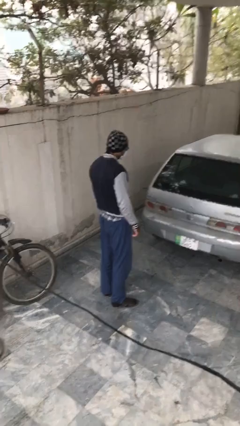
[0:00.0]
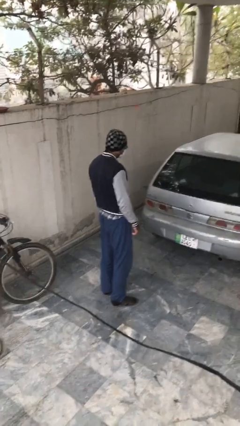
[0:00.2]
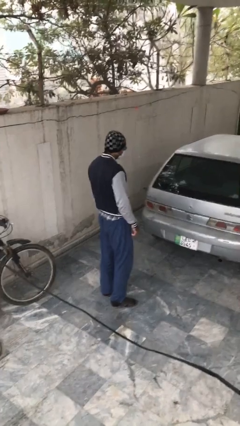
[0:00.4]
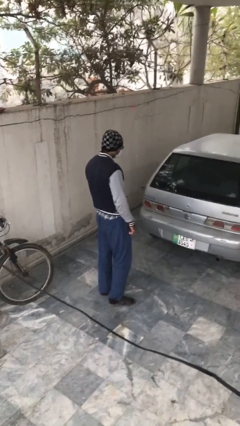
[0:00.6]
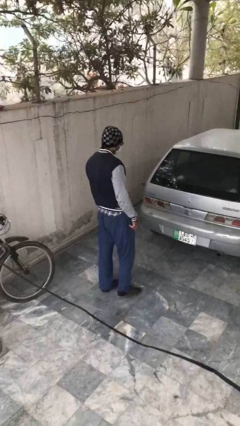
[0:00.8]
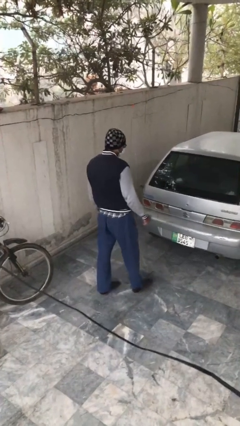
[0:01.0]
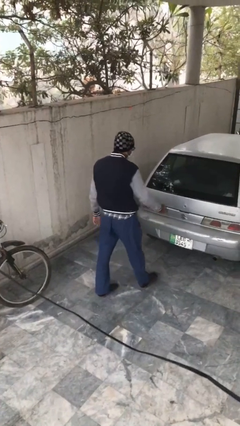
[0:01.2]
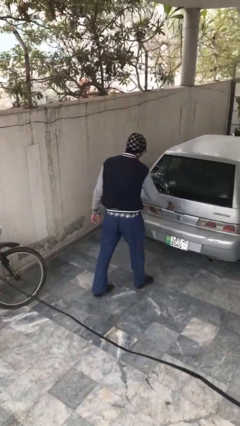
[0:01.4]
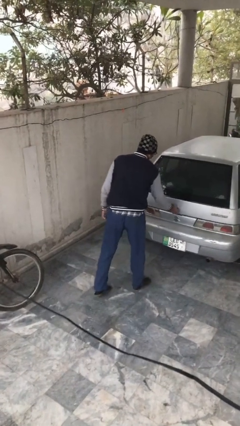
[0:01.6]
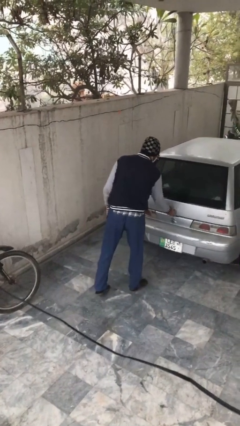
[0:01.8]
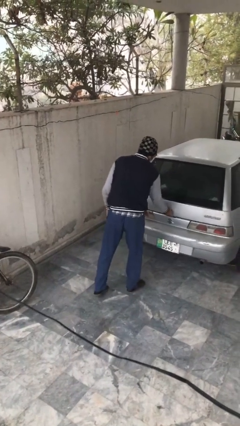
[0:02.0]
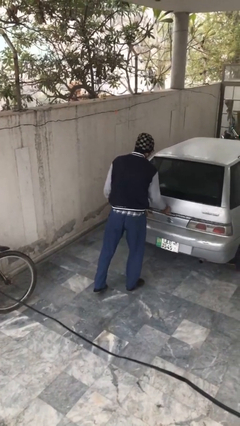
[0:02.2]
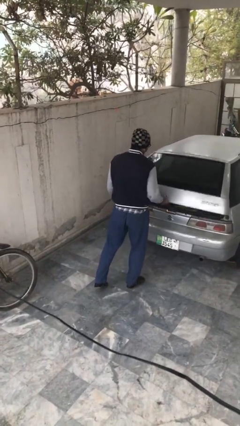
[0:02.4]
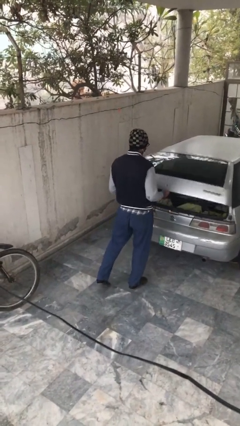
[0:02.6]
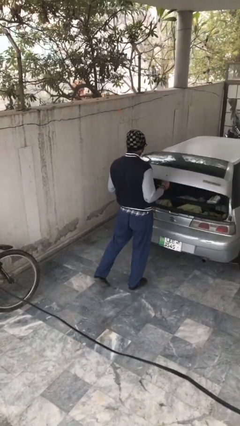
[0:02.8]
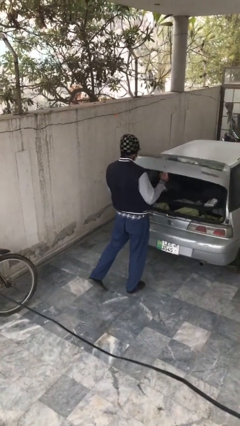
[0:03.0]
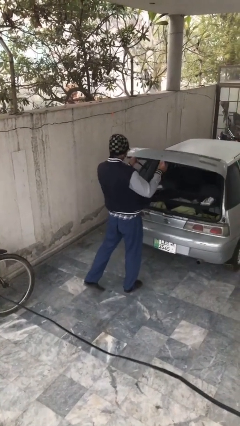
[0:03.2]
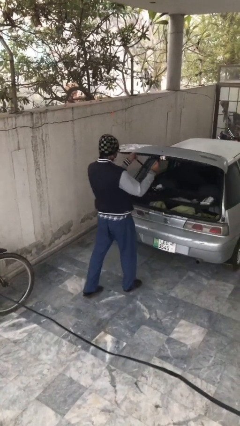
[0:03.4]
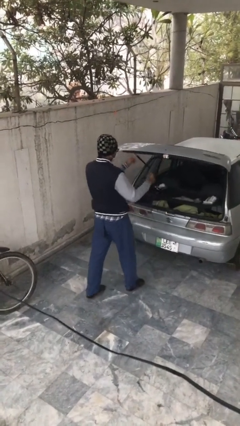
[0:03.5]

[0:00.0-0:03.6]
person opens car trunk

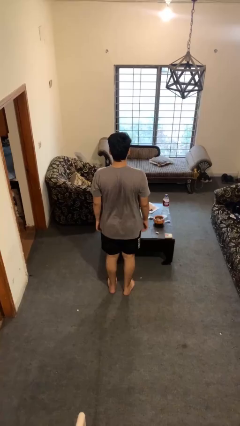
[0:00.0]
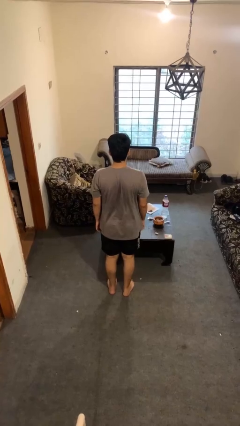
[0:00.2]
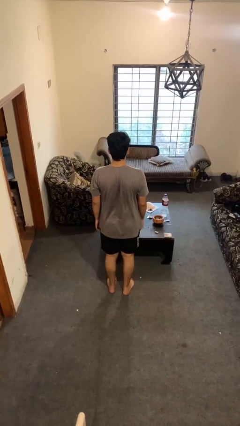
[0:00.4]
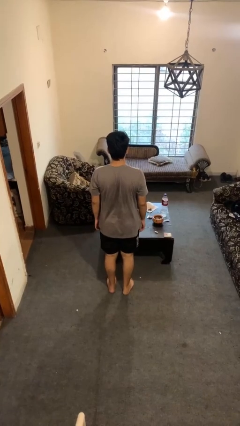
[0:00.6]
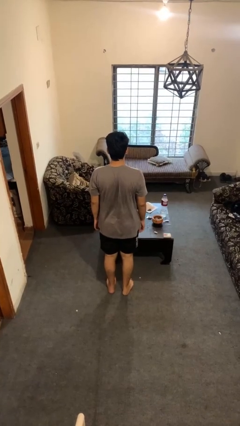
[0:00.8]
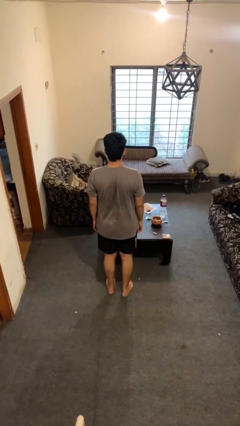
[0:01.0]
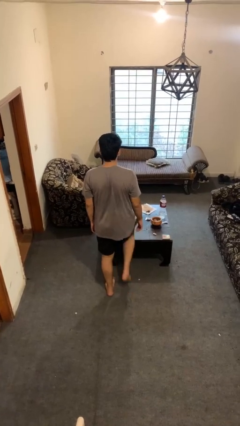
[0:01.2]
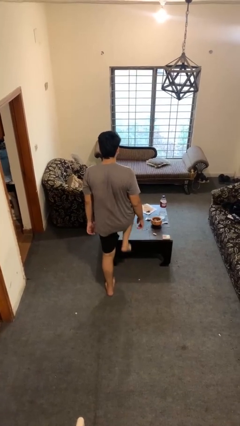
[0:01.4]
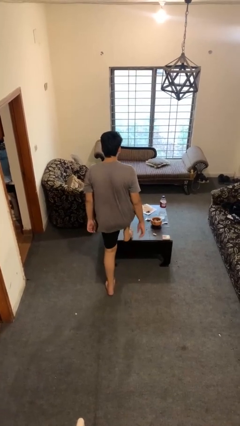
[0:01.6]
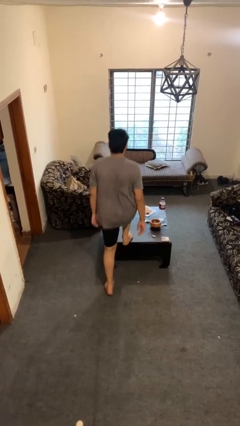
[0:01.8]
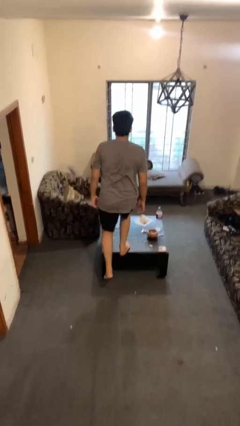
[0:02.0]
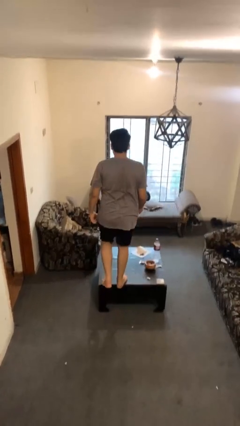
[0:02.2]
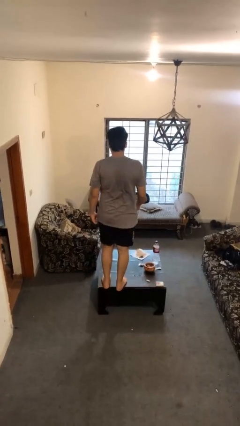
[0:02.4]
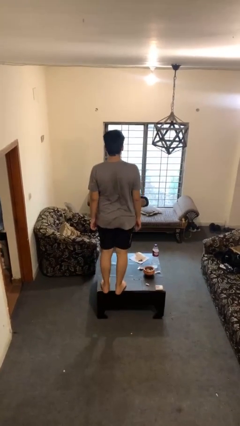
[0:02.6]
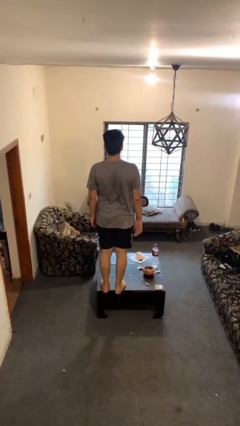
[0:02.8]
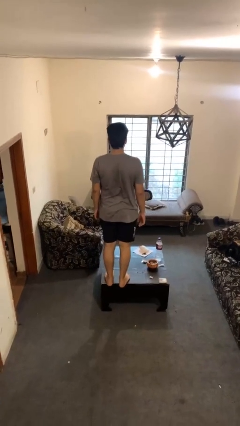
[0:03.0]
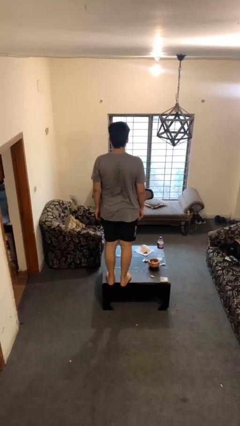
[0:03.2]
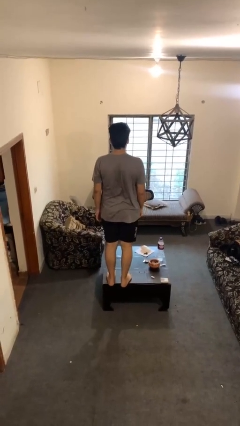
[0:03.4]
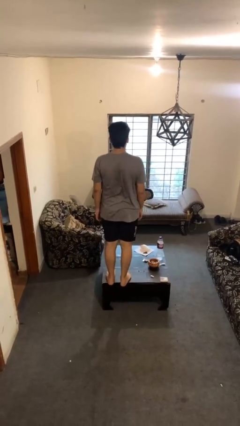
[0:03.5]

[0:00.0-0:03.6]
person climbs on table

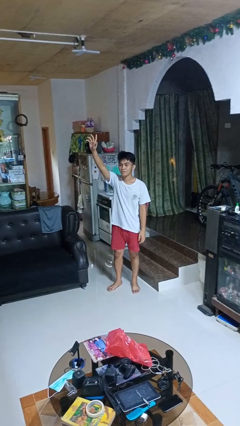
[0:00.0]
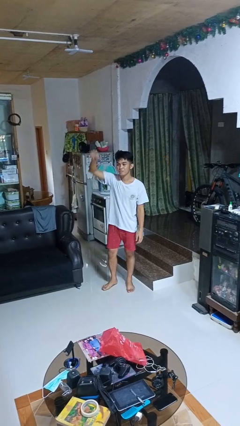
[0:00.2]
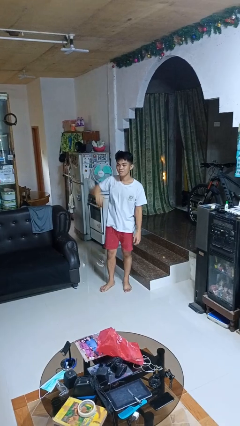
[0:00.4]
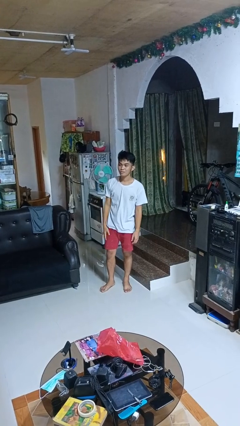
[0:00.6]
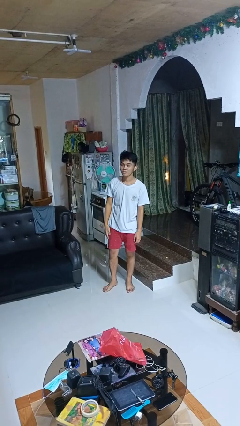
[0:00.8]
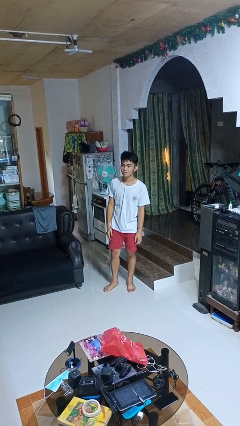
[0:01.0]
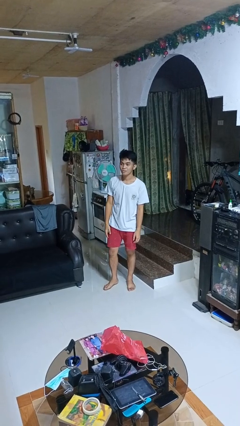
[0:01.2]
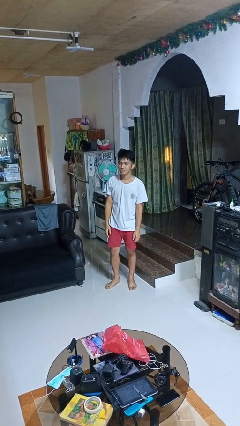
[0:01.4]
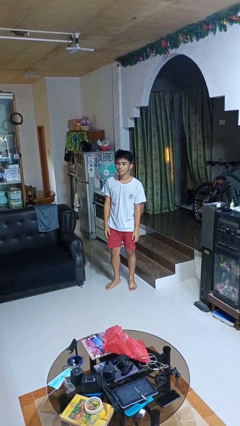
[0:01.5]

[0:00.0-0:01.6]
person gestures lower hand

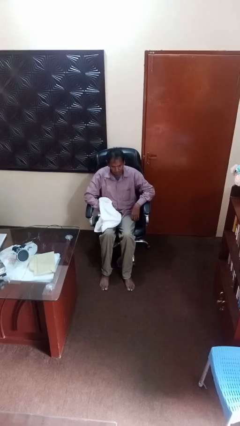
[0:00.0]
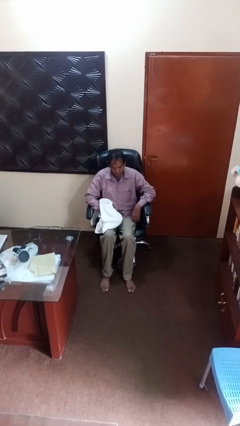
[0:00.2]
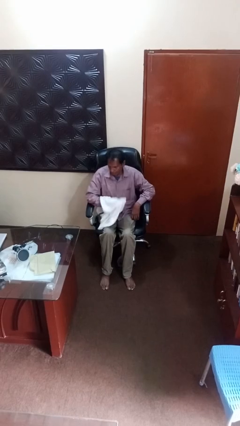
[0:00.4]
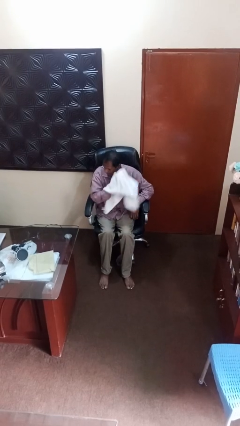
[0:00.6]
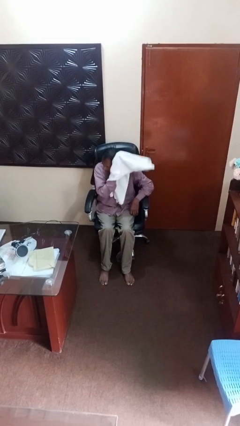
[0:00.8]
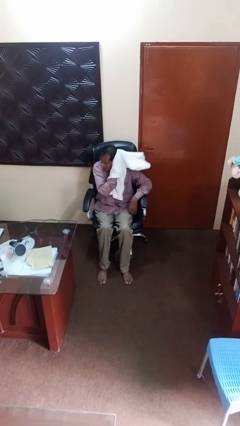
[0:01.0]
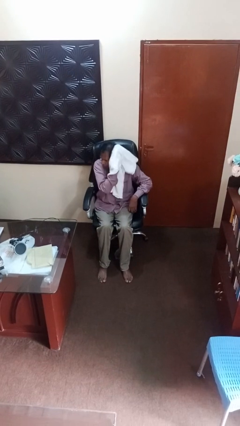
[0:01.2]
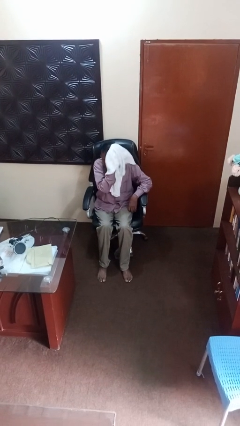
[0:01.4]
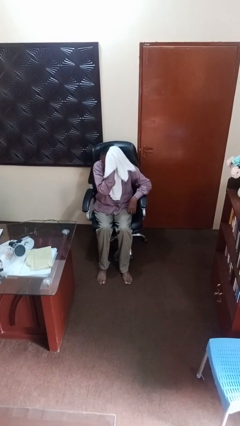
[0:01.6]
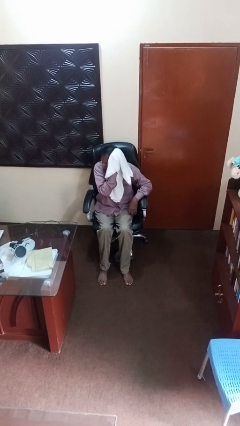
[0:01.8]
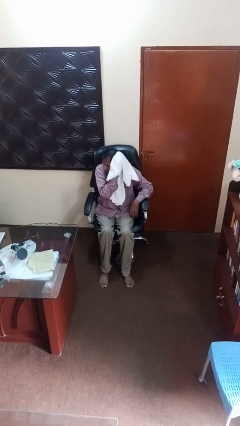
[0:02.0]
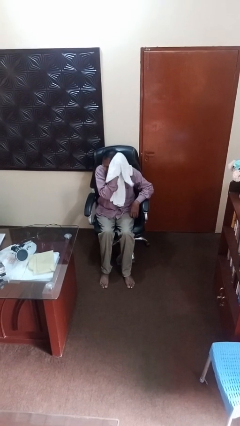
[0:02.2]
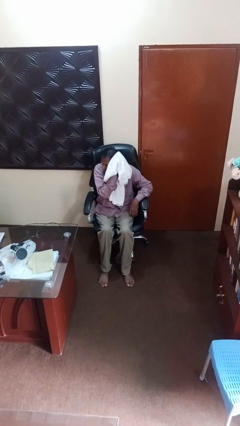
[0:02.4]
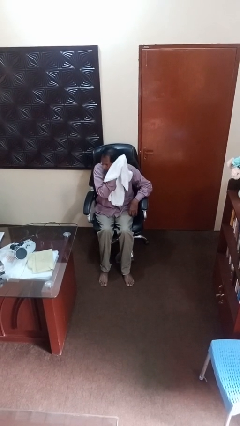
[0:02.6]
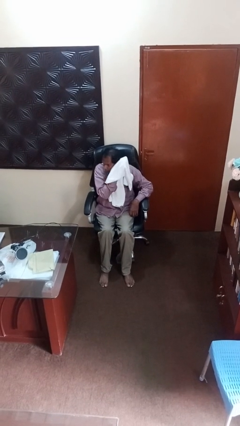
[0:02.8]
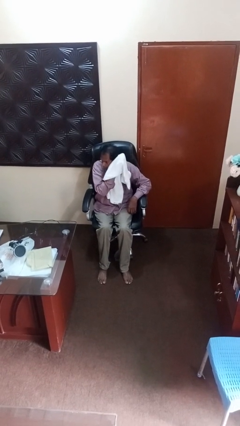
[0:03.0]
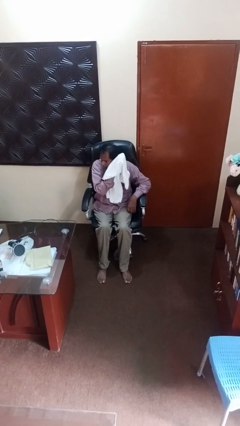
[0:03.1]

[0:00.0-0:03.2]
person dries hair with towel

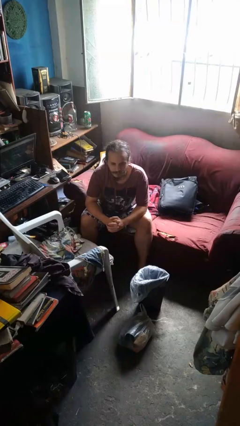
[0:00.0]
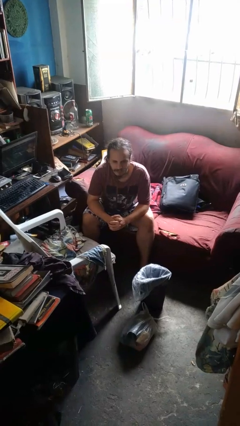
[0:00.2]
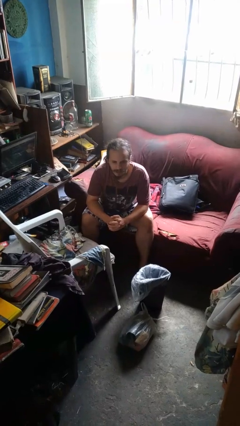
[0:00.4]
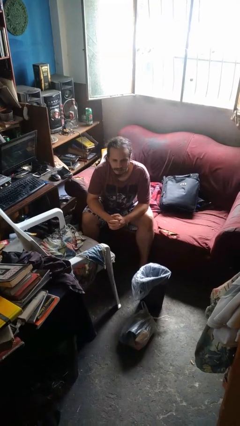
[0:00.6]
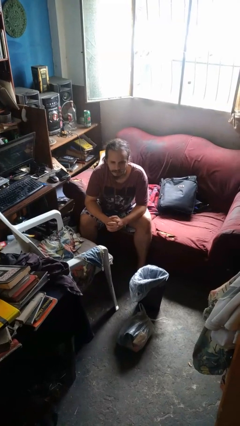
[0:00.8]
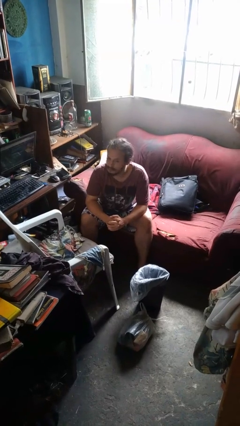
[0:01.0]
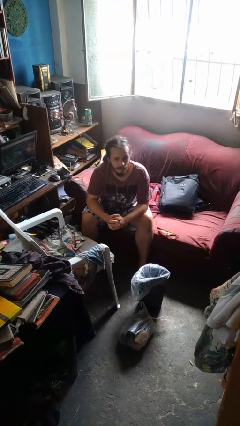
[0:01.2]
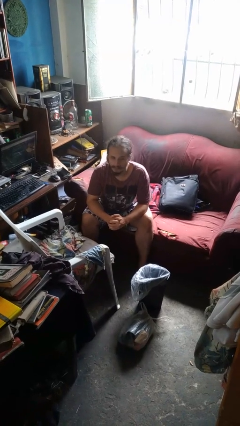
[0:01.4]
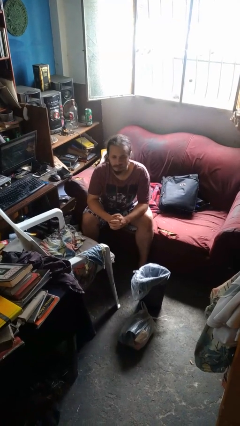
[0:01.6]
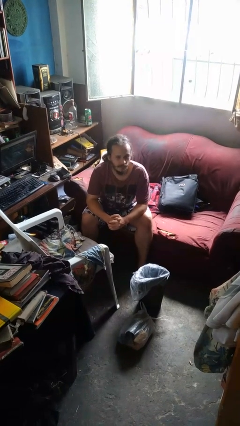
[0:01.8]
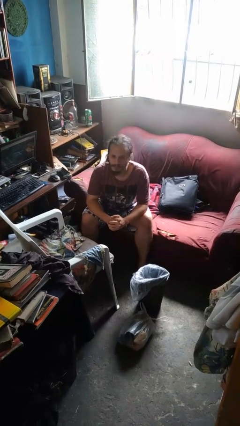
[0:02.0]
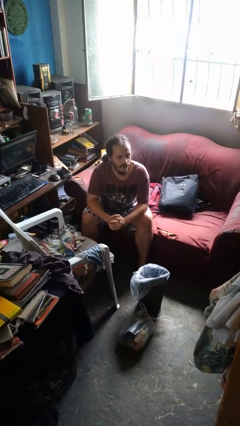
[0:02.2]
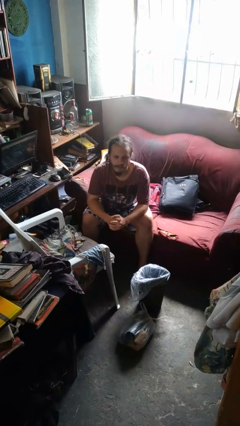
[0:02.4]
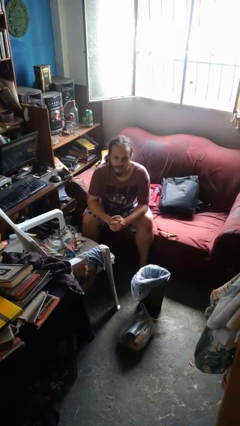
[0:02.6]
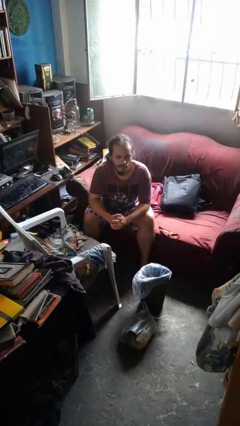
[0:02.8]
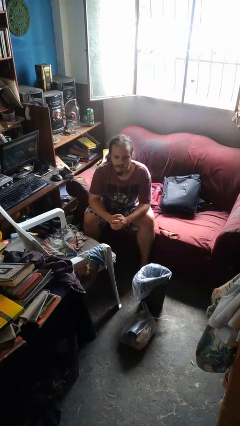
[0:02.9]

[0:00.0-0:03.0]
person shakes head

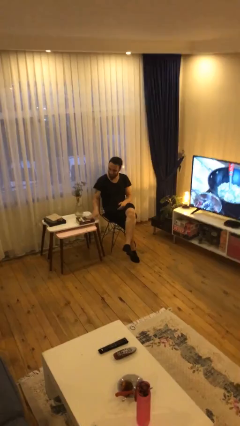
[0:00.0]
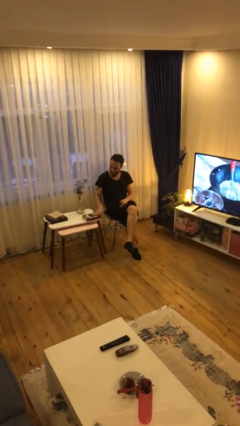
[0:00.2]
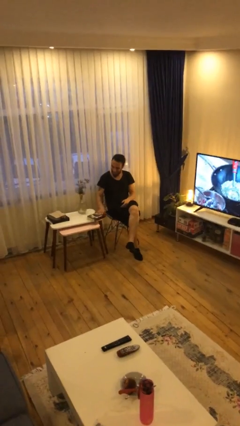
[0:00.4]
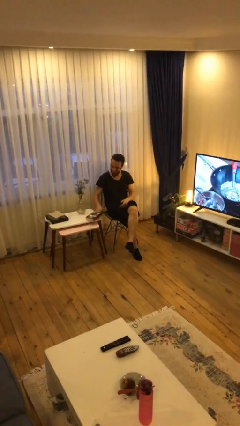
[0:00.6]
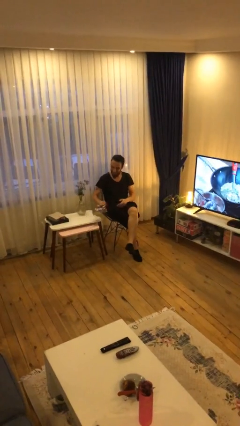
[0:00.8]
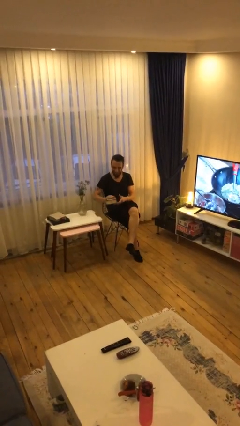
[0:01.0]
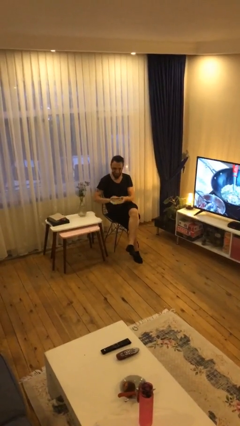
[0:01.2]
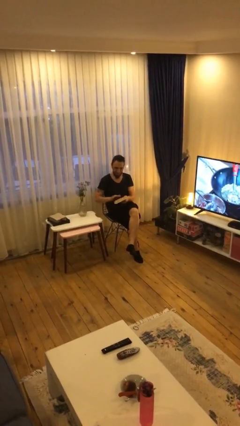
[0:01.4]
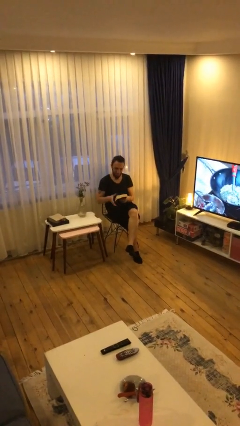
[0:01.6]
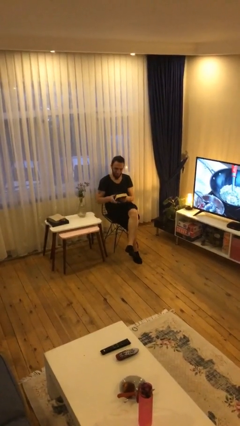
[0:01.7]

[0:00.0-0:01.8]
person picks up object from table

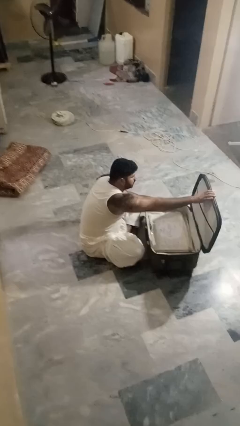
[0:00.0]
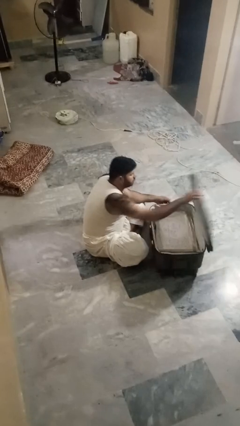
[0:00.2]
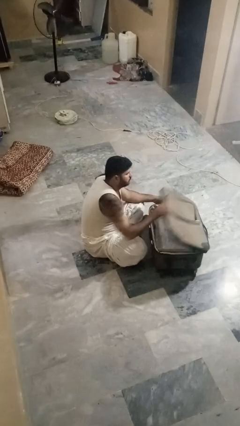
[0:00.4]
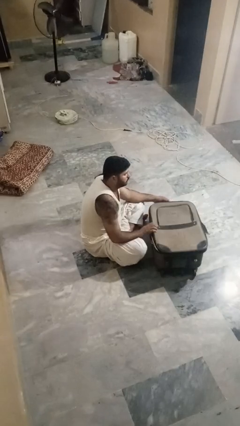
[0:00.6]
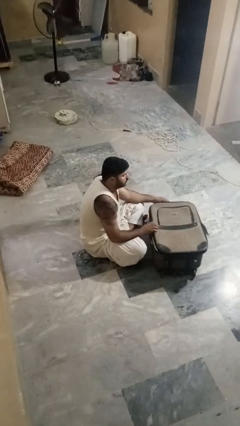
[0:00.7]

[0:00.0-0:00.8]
person closes suitcase
